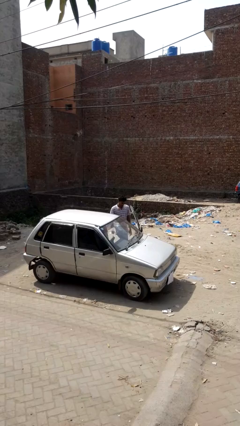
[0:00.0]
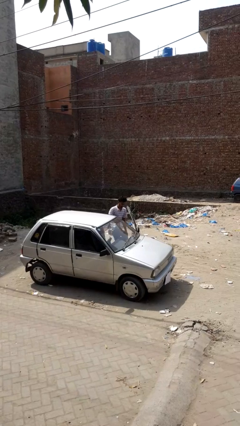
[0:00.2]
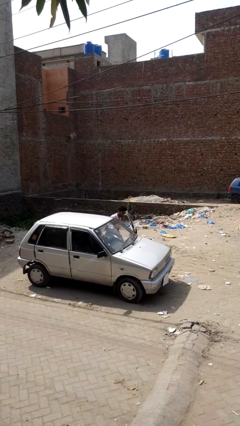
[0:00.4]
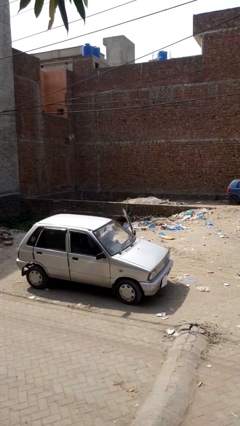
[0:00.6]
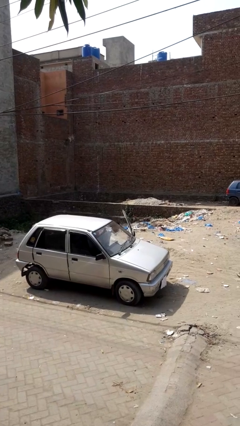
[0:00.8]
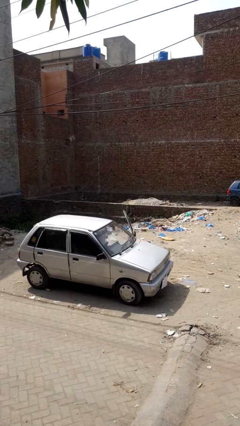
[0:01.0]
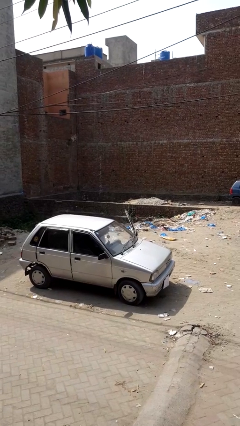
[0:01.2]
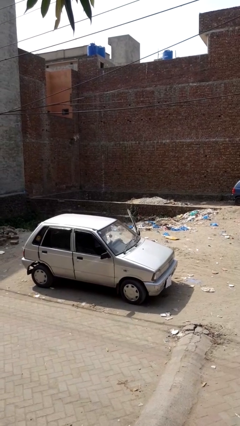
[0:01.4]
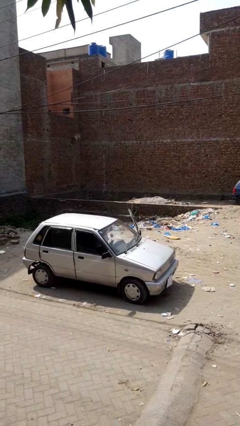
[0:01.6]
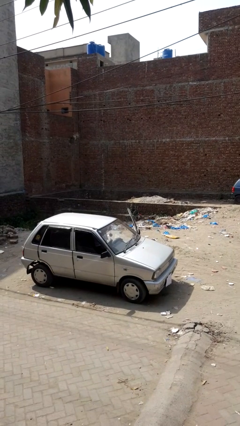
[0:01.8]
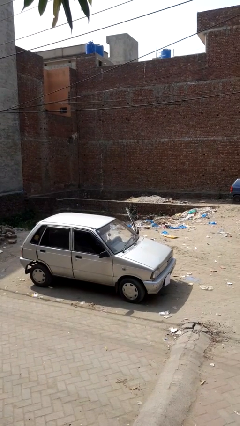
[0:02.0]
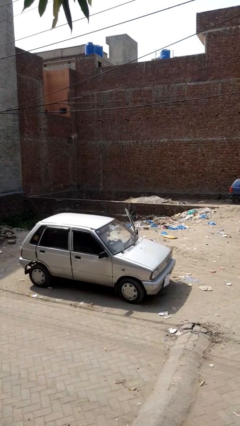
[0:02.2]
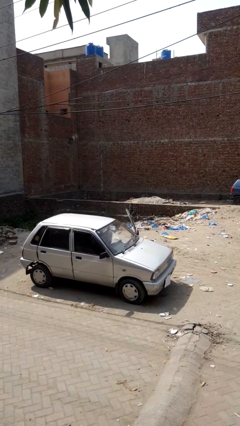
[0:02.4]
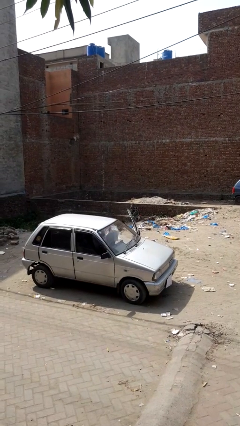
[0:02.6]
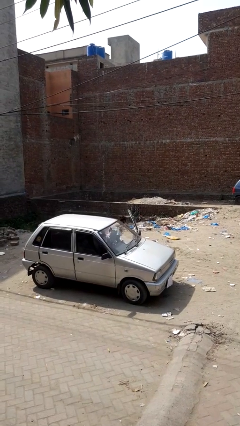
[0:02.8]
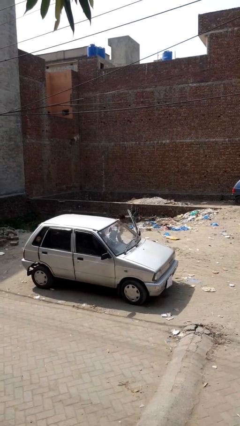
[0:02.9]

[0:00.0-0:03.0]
person enters car

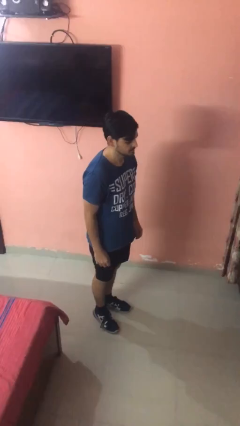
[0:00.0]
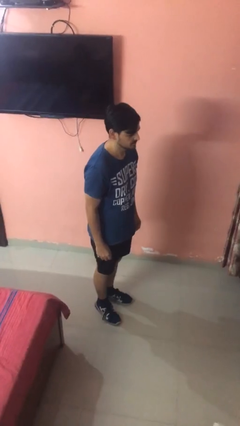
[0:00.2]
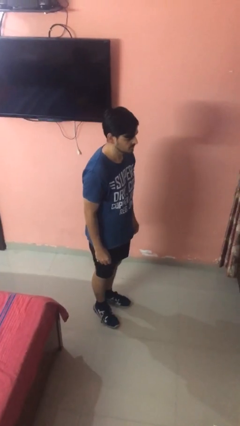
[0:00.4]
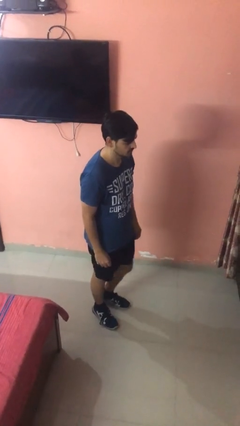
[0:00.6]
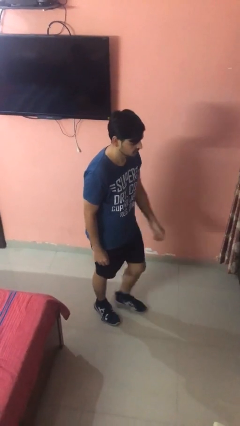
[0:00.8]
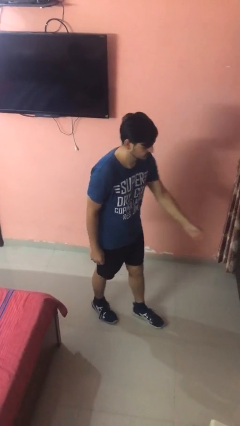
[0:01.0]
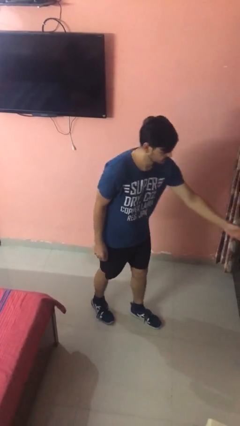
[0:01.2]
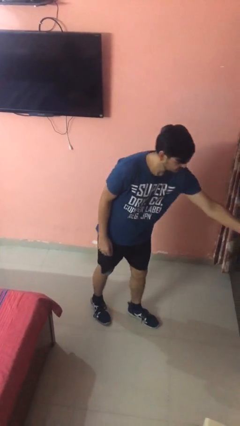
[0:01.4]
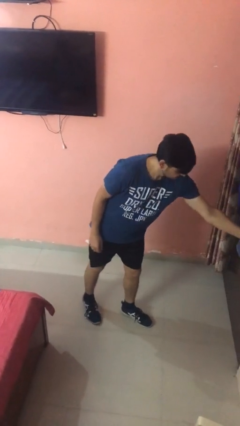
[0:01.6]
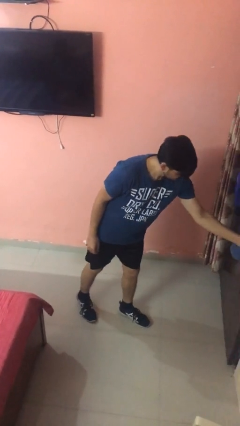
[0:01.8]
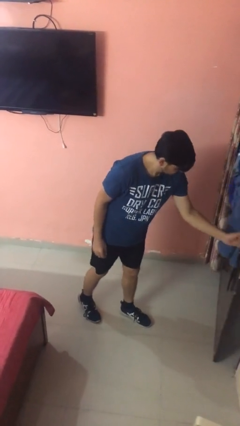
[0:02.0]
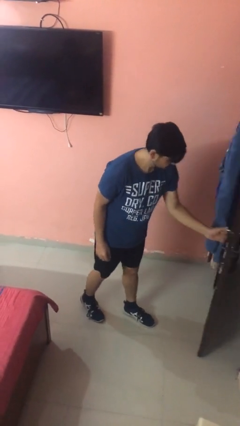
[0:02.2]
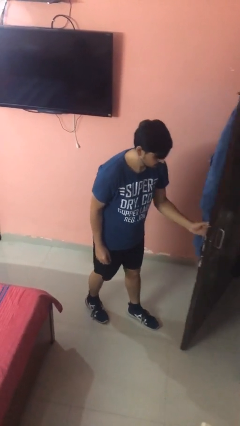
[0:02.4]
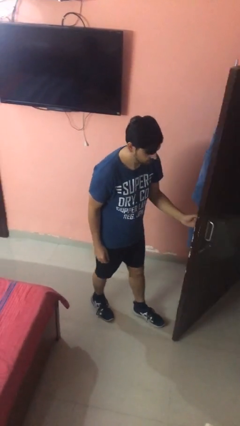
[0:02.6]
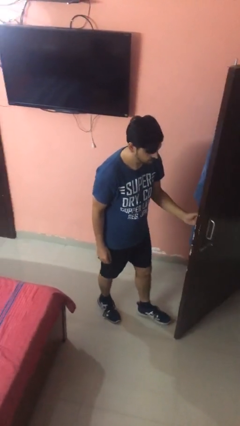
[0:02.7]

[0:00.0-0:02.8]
person opens facility door

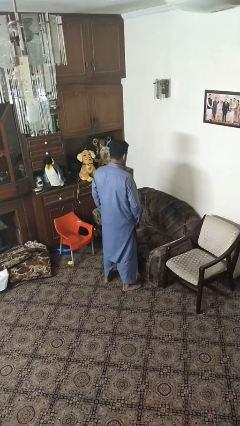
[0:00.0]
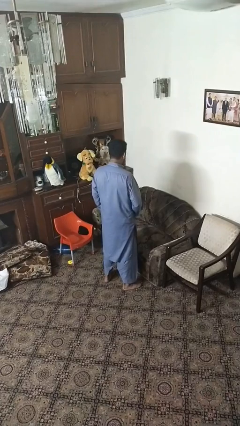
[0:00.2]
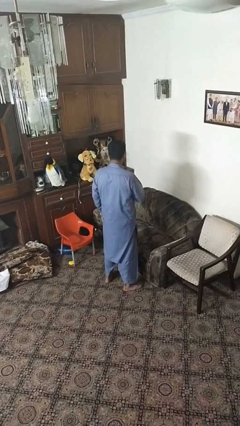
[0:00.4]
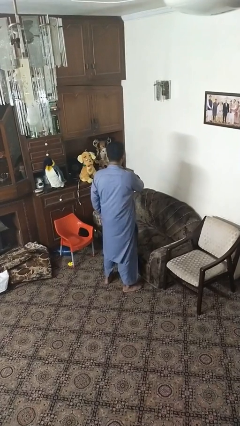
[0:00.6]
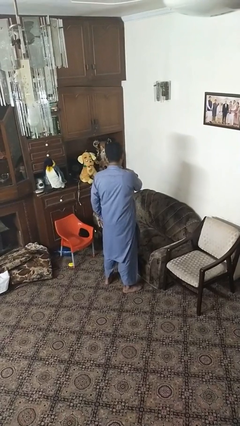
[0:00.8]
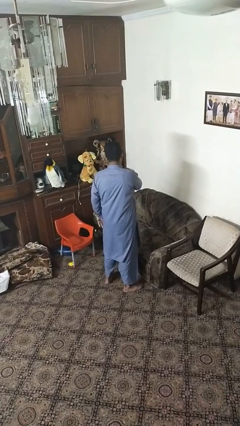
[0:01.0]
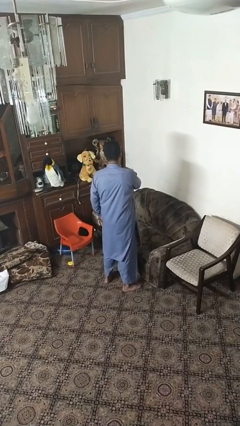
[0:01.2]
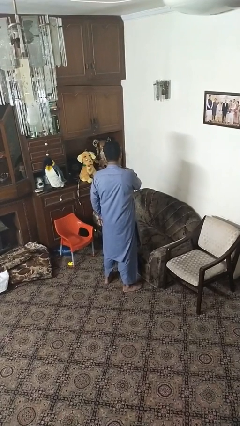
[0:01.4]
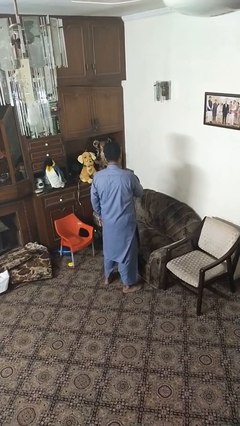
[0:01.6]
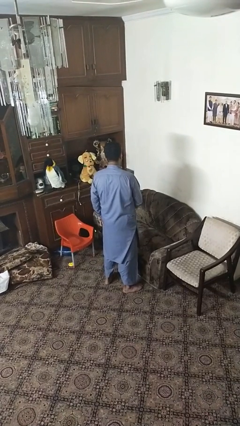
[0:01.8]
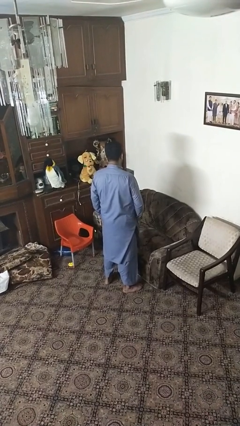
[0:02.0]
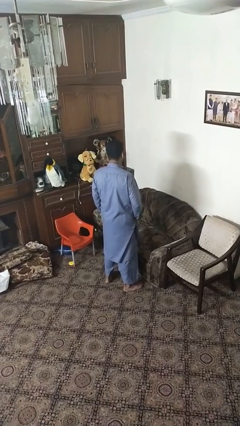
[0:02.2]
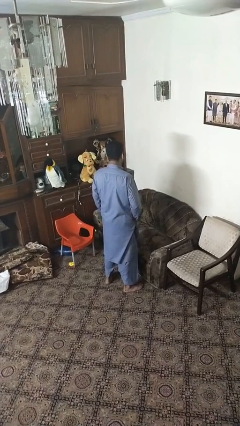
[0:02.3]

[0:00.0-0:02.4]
person strokes chin

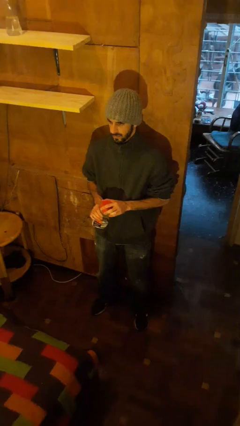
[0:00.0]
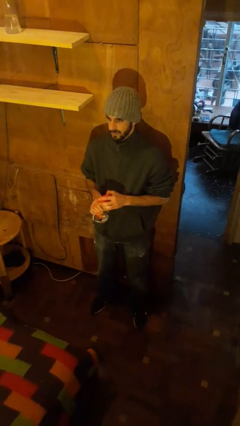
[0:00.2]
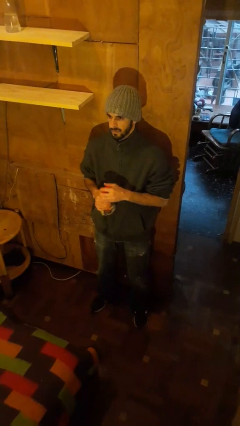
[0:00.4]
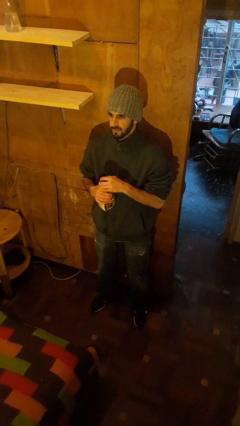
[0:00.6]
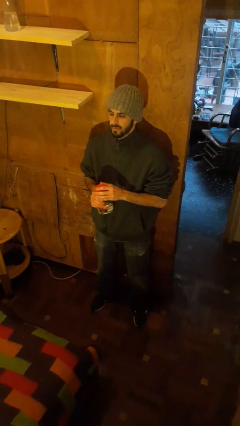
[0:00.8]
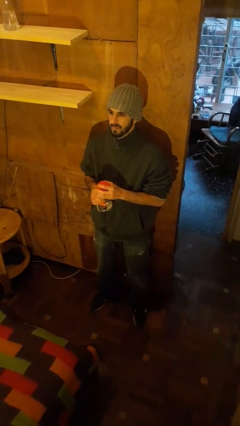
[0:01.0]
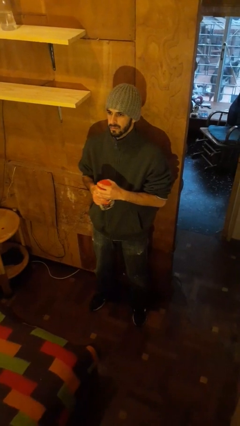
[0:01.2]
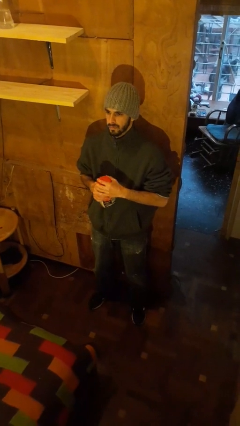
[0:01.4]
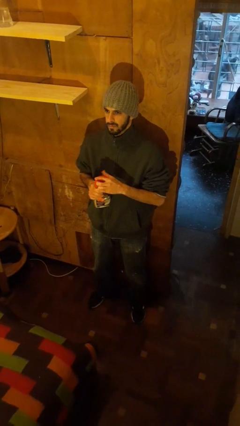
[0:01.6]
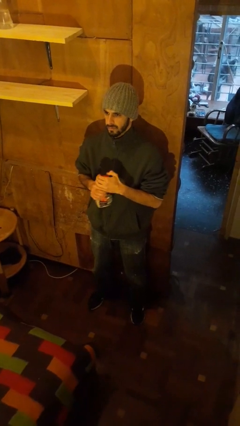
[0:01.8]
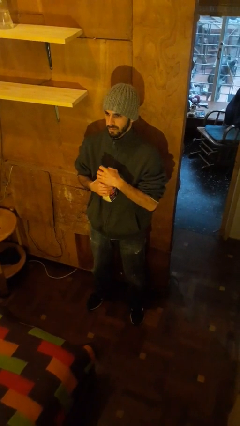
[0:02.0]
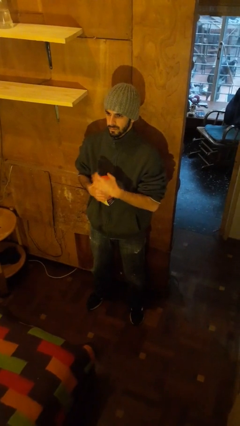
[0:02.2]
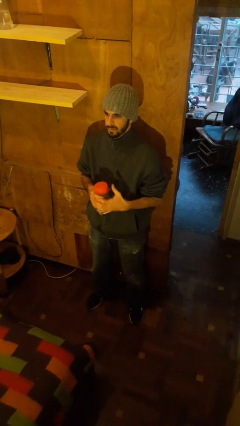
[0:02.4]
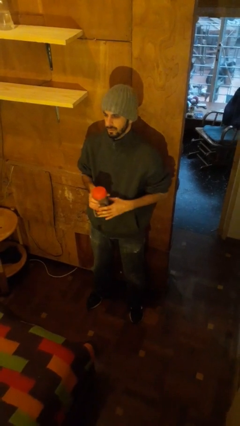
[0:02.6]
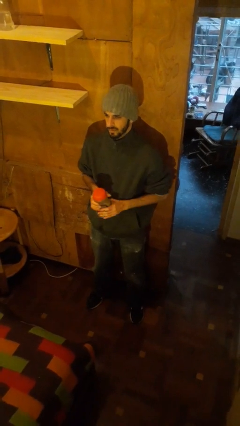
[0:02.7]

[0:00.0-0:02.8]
person closes jar

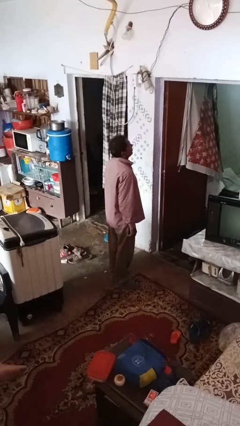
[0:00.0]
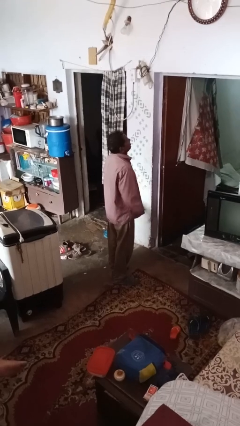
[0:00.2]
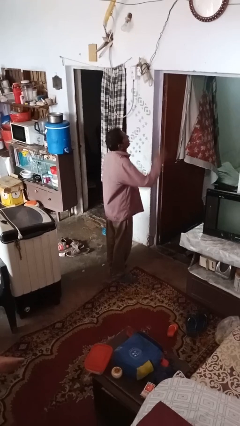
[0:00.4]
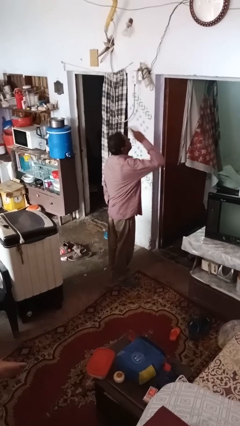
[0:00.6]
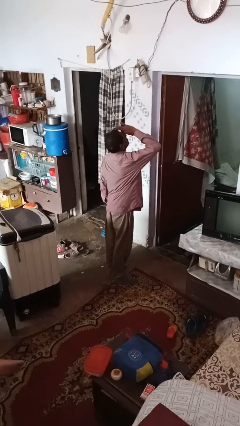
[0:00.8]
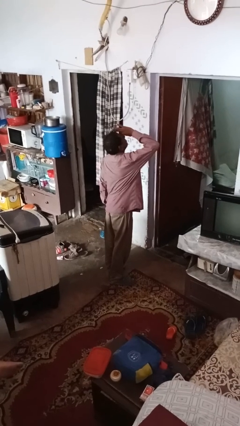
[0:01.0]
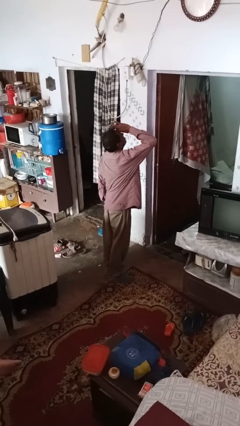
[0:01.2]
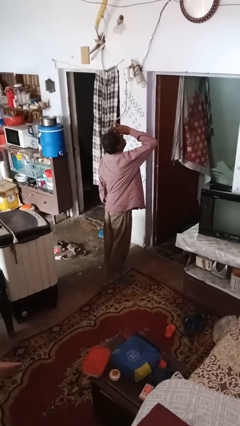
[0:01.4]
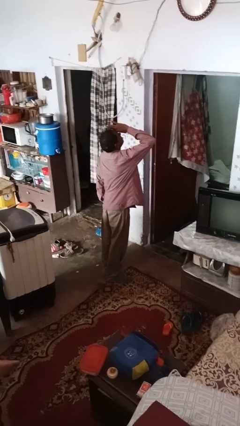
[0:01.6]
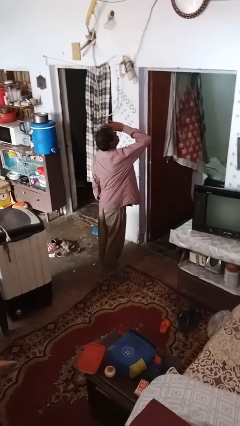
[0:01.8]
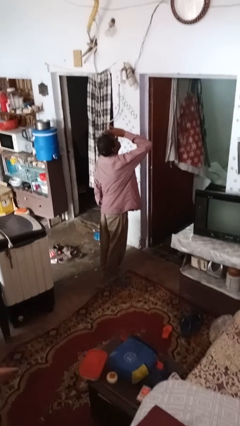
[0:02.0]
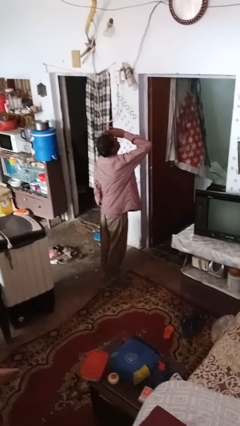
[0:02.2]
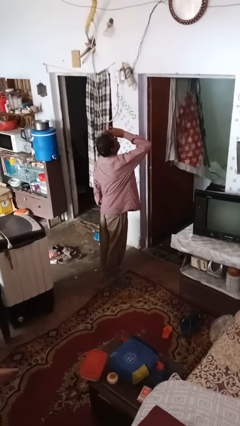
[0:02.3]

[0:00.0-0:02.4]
person gestures watch closely

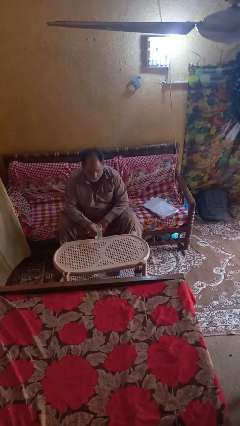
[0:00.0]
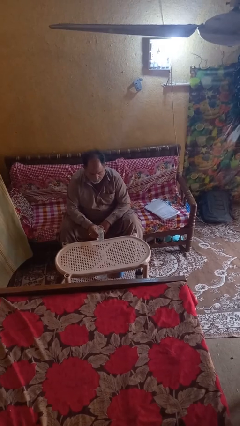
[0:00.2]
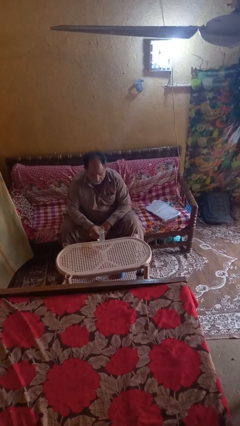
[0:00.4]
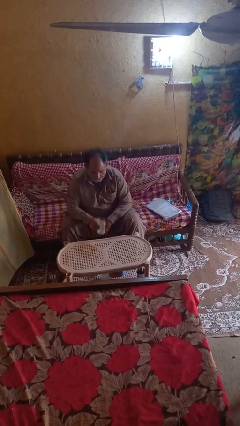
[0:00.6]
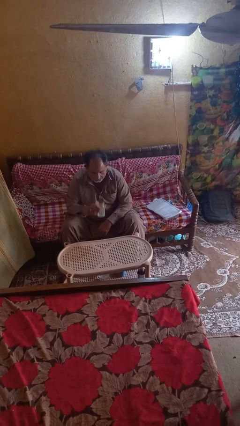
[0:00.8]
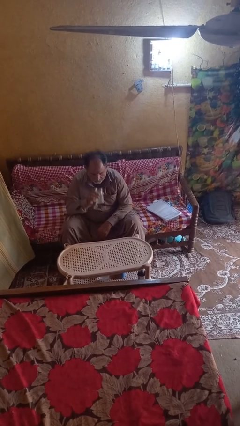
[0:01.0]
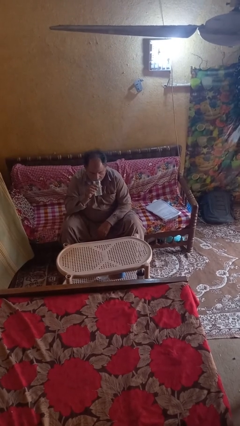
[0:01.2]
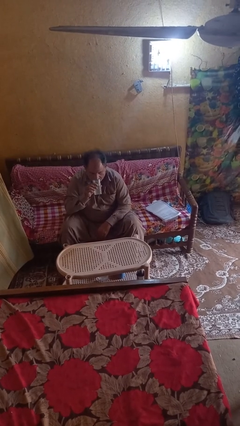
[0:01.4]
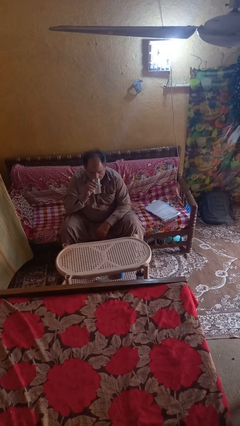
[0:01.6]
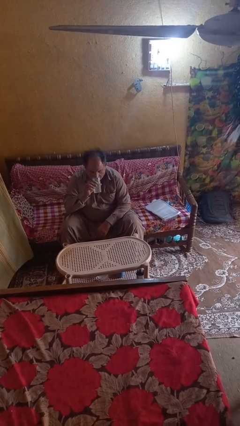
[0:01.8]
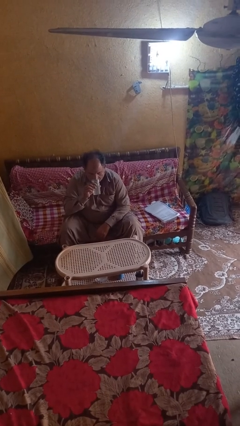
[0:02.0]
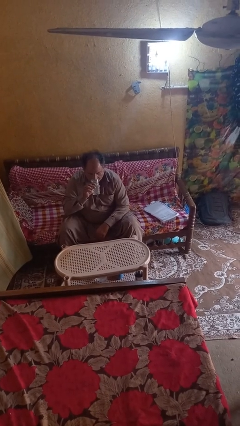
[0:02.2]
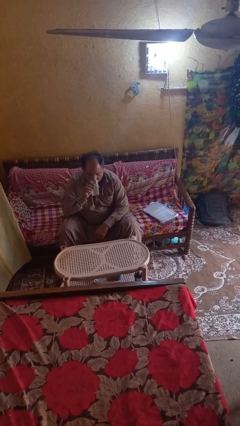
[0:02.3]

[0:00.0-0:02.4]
person drinks from shotglass

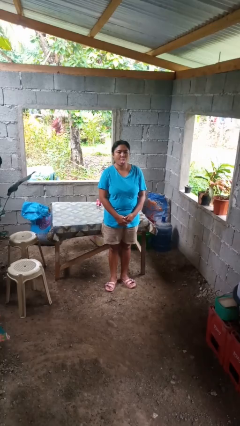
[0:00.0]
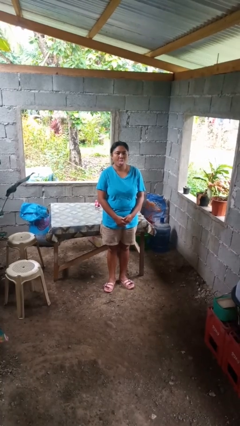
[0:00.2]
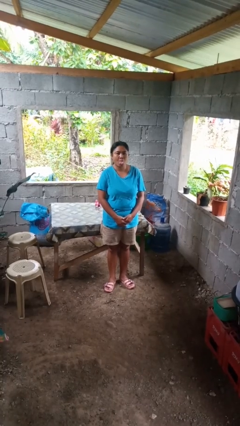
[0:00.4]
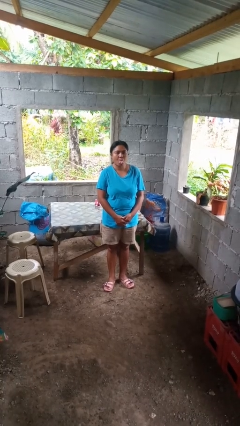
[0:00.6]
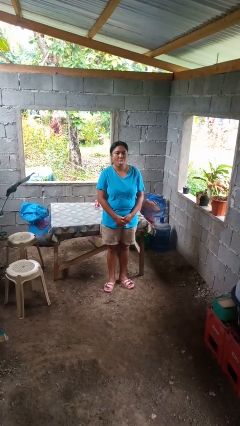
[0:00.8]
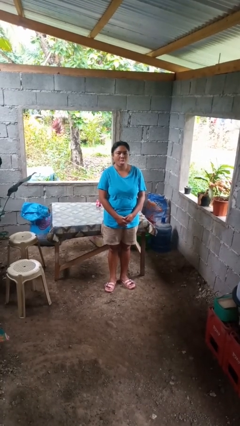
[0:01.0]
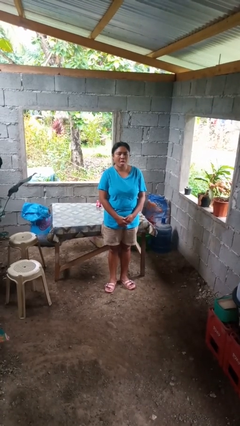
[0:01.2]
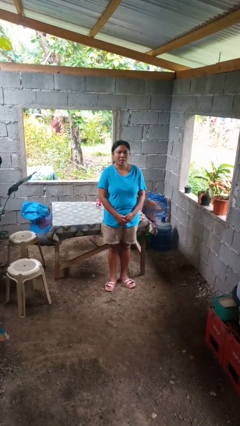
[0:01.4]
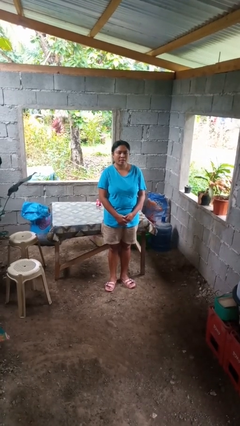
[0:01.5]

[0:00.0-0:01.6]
person sticks out tongue
